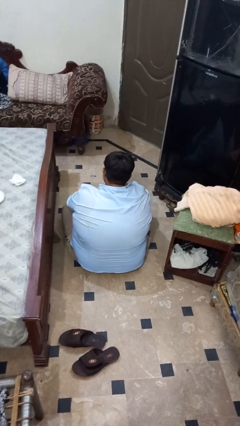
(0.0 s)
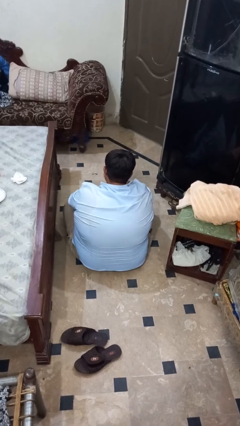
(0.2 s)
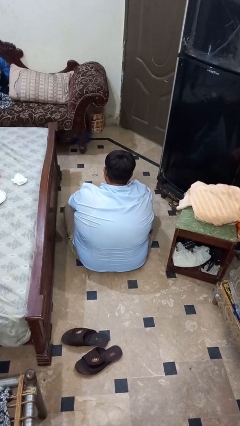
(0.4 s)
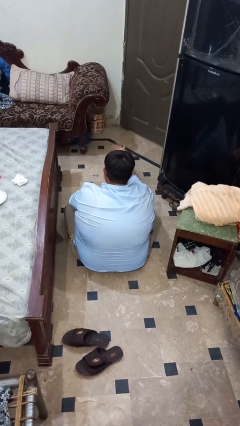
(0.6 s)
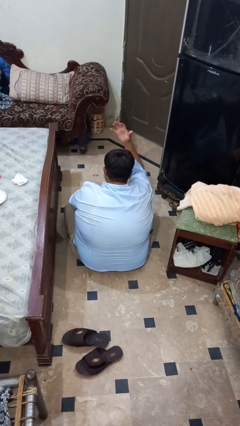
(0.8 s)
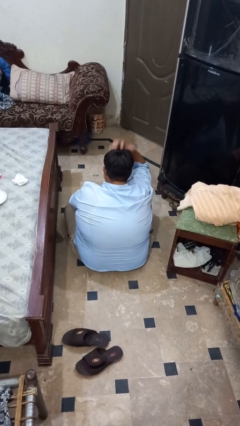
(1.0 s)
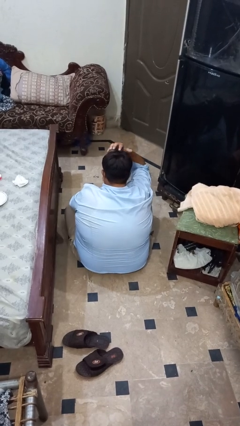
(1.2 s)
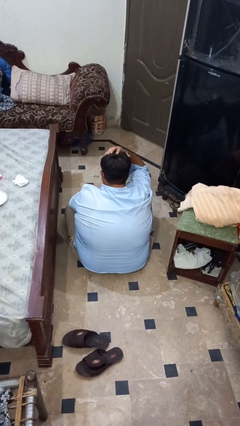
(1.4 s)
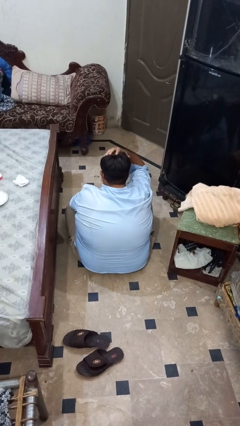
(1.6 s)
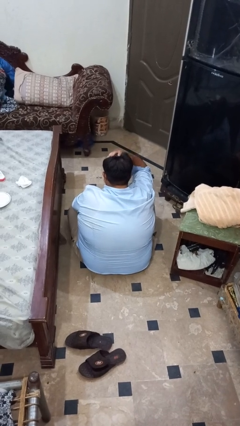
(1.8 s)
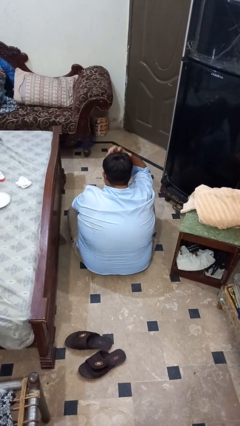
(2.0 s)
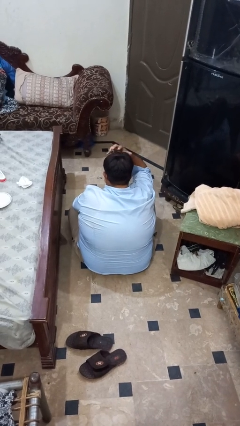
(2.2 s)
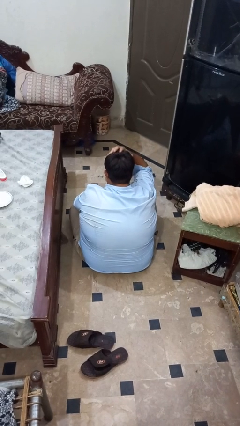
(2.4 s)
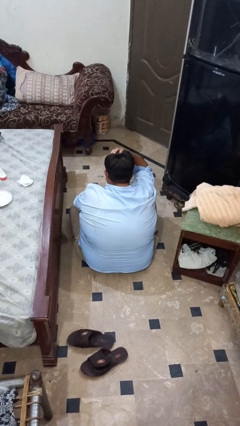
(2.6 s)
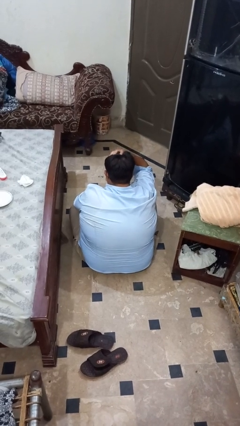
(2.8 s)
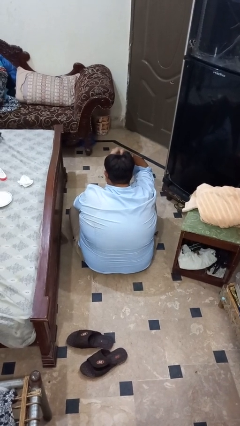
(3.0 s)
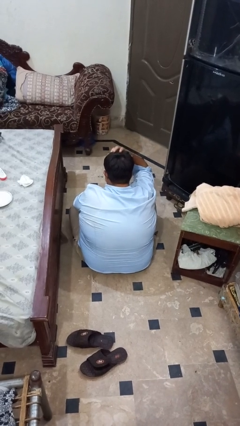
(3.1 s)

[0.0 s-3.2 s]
person pats head

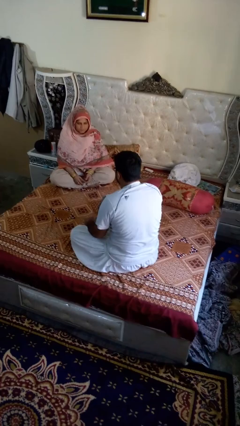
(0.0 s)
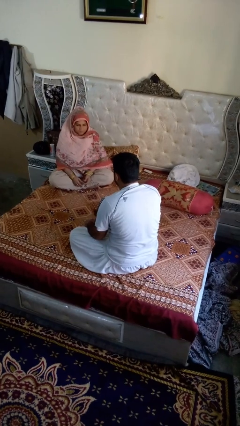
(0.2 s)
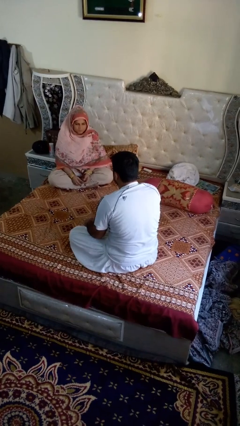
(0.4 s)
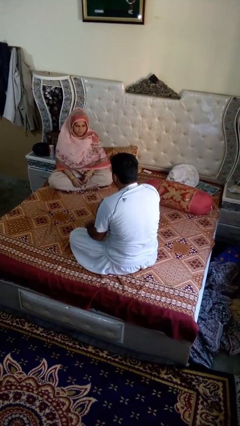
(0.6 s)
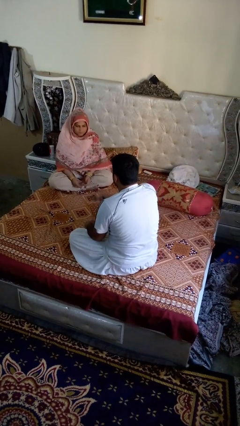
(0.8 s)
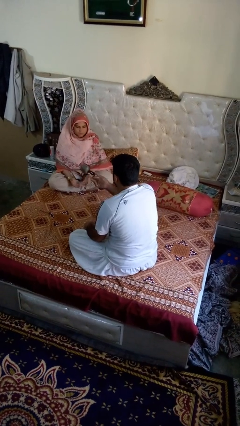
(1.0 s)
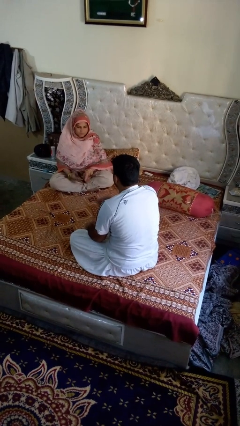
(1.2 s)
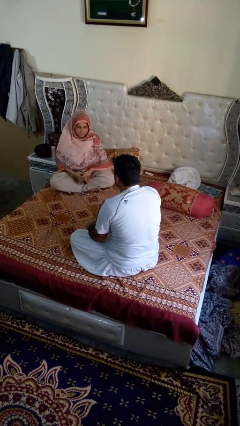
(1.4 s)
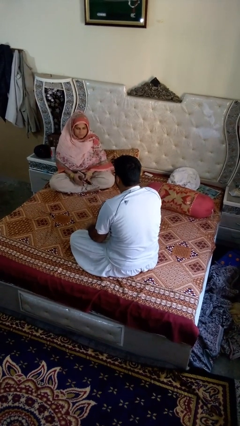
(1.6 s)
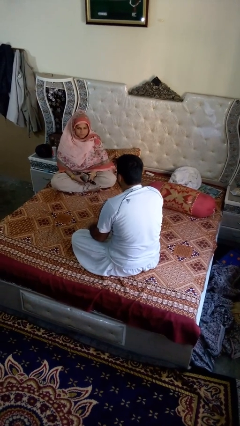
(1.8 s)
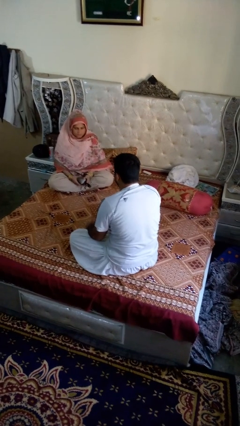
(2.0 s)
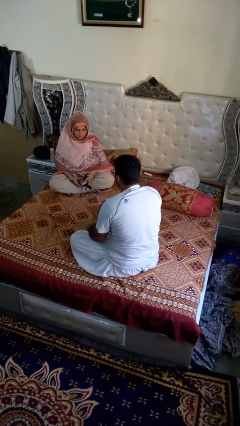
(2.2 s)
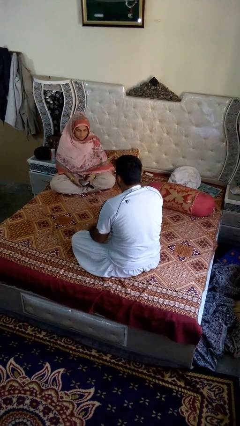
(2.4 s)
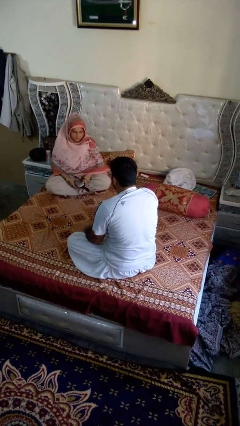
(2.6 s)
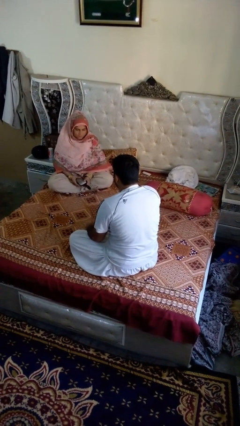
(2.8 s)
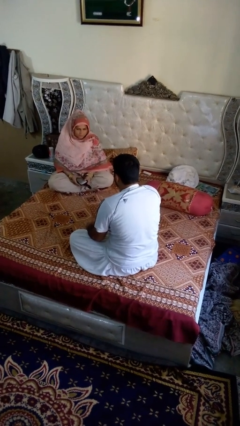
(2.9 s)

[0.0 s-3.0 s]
person throws object to person

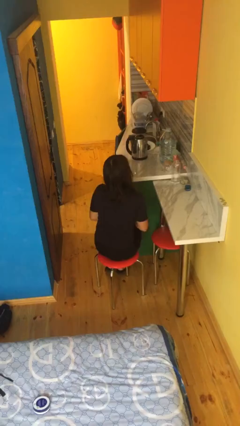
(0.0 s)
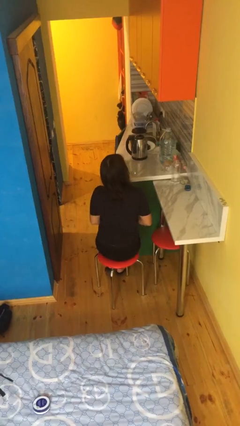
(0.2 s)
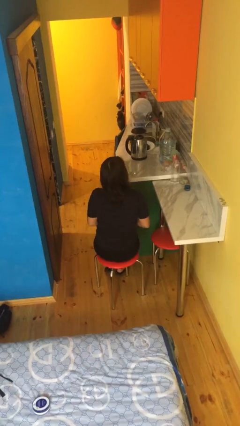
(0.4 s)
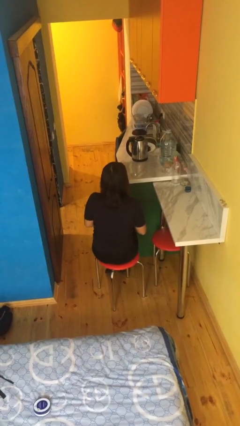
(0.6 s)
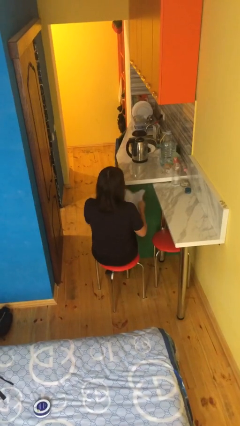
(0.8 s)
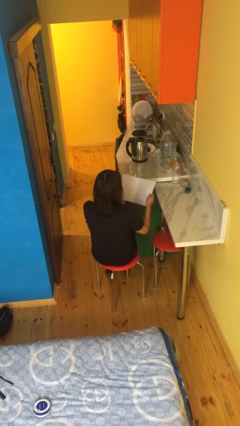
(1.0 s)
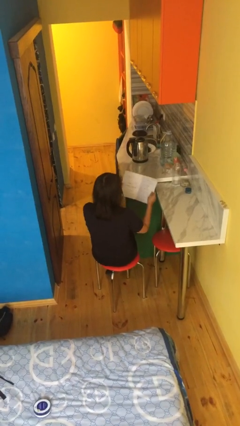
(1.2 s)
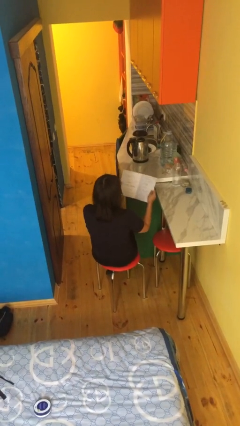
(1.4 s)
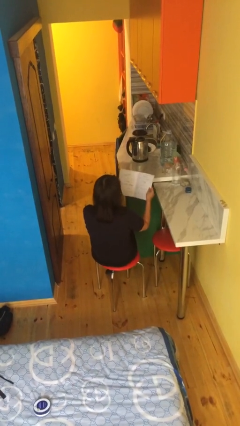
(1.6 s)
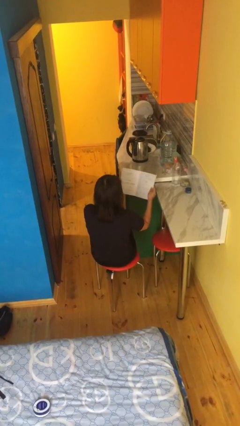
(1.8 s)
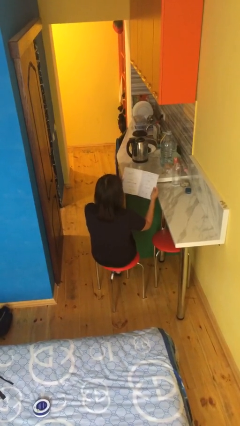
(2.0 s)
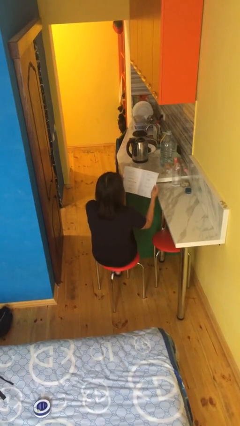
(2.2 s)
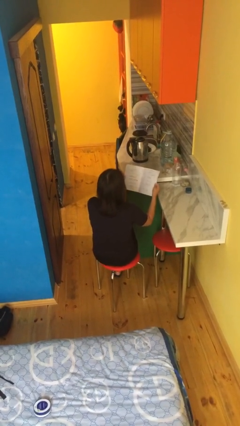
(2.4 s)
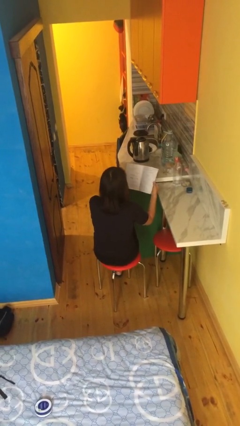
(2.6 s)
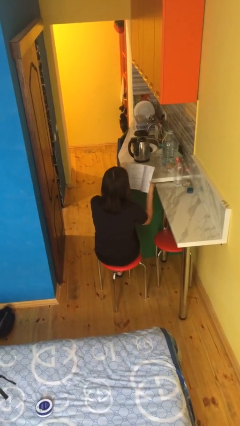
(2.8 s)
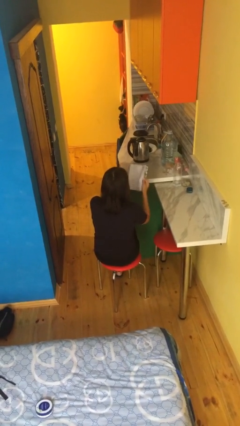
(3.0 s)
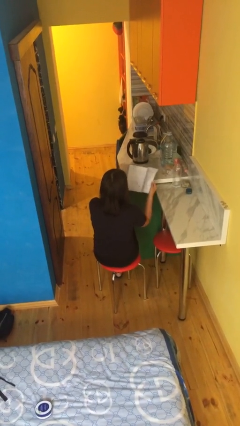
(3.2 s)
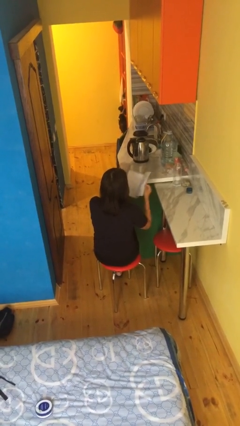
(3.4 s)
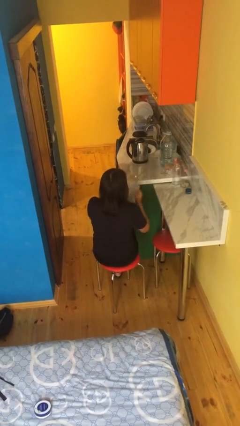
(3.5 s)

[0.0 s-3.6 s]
person reads book

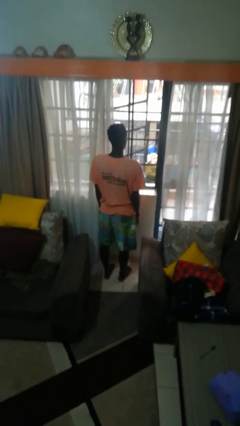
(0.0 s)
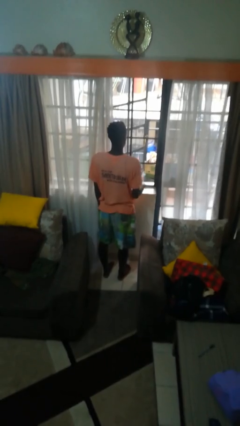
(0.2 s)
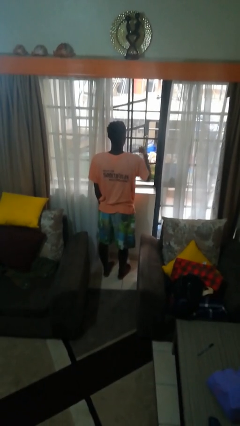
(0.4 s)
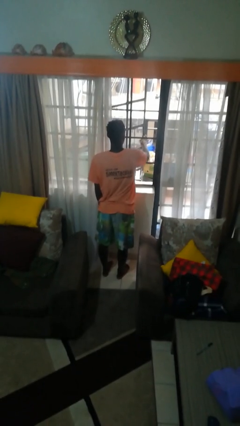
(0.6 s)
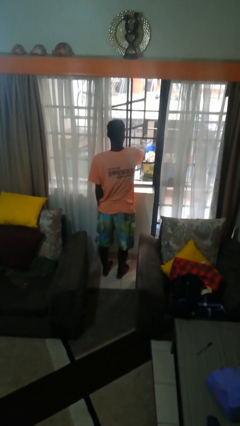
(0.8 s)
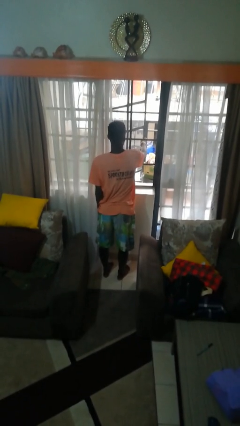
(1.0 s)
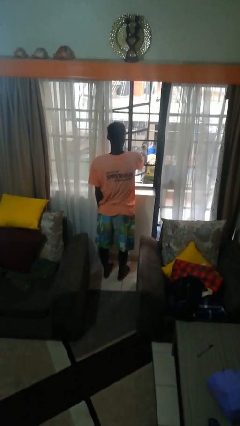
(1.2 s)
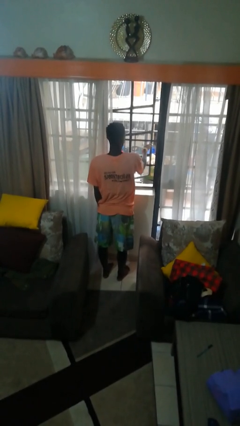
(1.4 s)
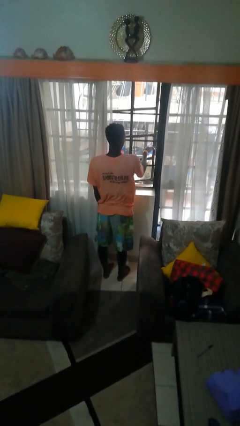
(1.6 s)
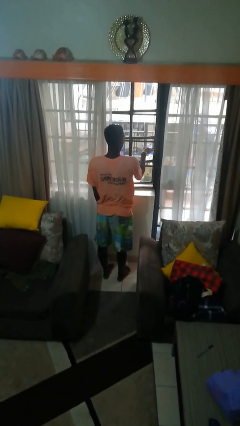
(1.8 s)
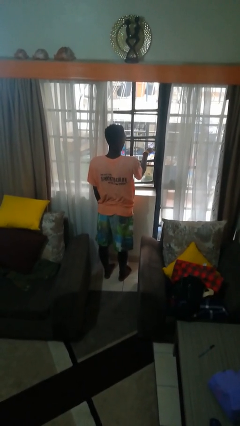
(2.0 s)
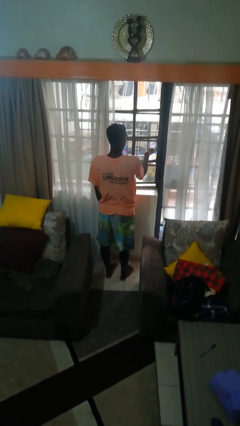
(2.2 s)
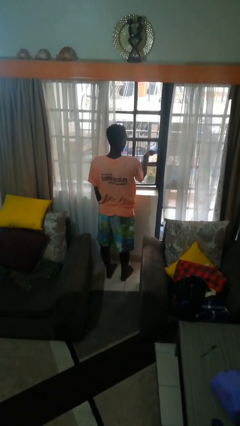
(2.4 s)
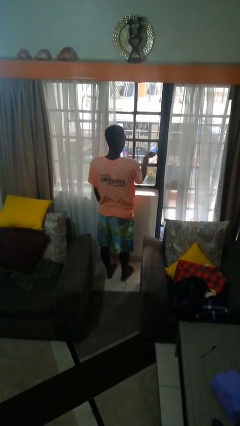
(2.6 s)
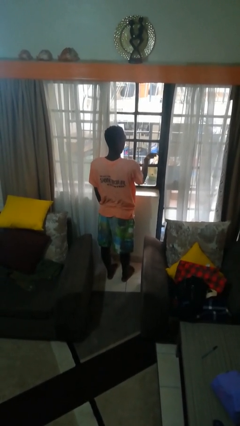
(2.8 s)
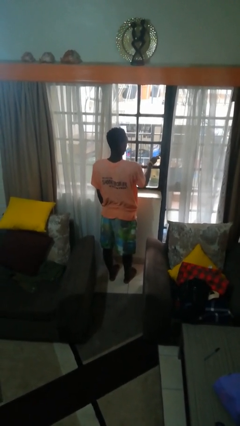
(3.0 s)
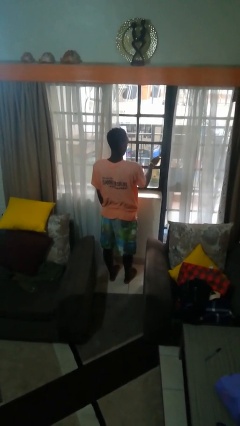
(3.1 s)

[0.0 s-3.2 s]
person closes home window

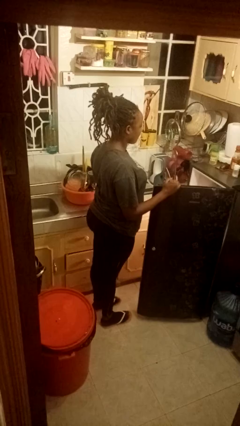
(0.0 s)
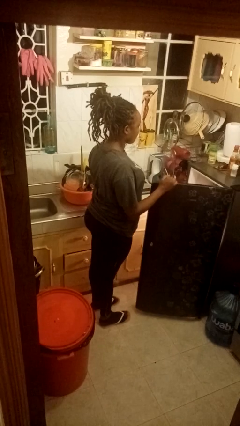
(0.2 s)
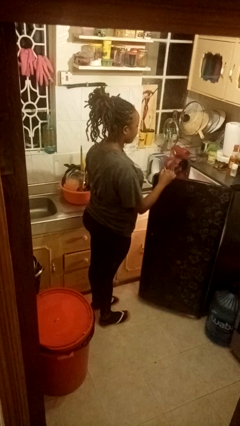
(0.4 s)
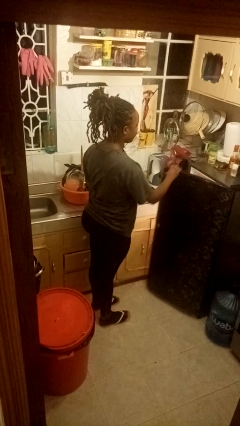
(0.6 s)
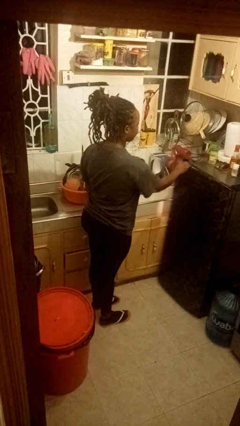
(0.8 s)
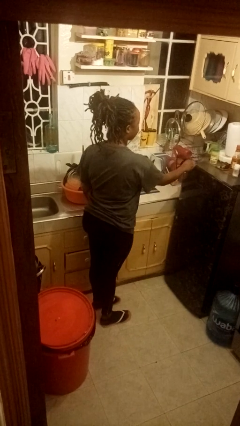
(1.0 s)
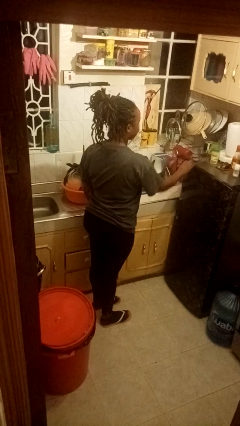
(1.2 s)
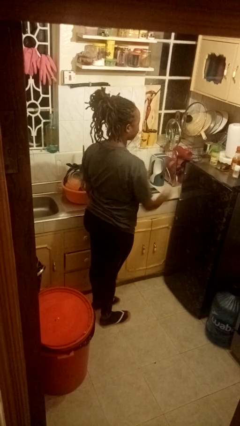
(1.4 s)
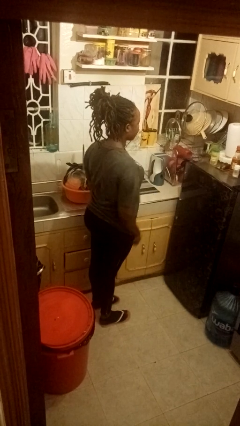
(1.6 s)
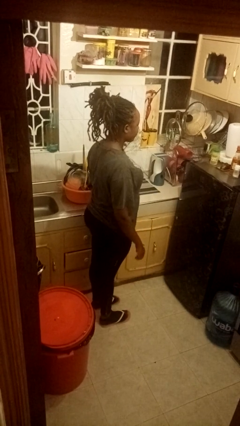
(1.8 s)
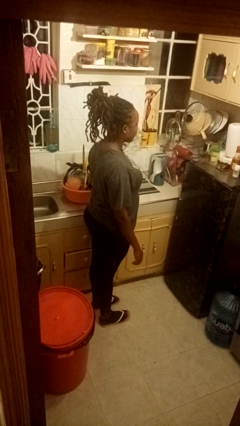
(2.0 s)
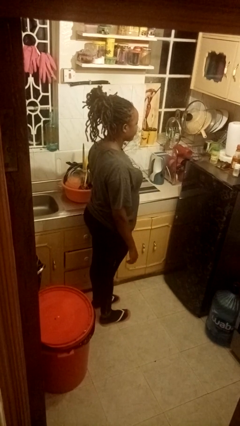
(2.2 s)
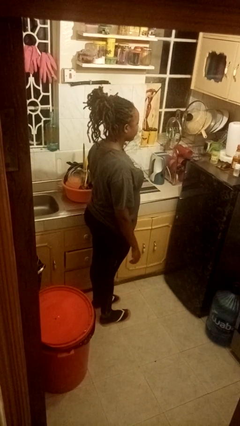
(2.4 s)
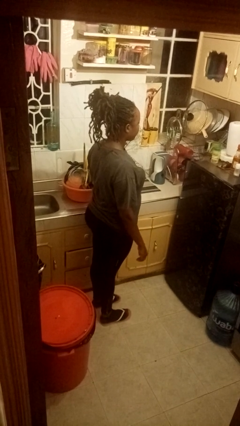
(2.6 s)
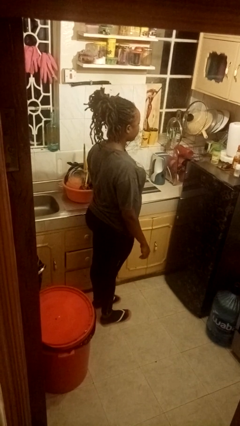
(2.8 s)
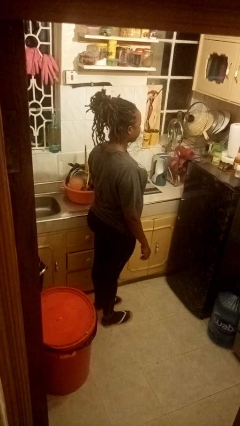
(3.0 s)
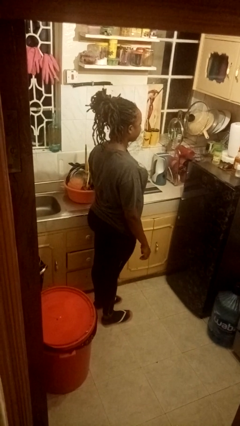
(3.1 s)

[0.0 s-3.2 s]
person closes refrigerator

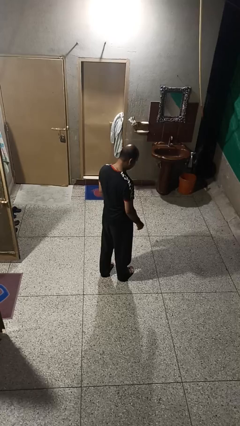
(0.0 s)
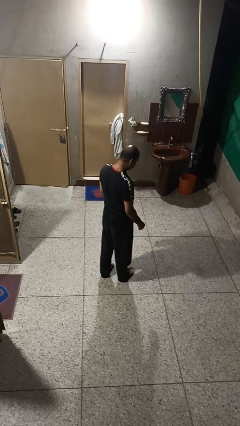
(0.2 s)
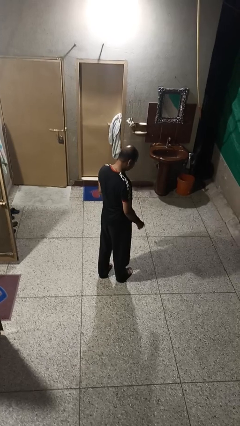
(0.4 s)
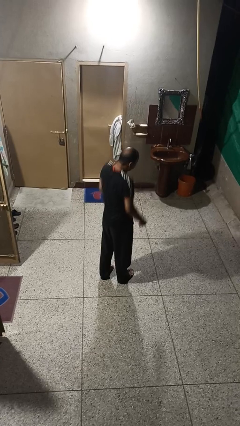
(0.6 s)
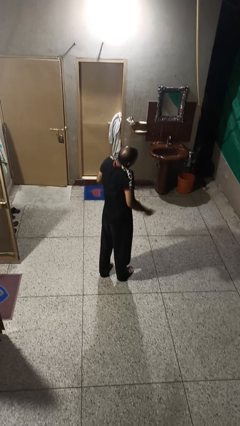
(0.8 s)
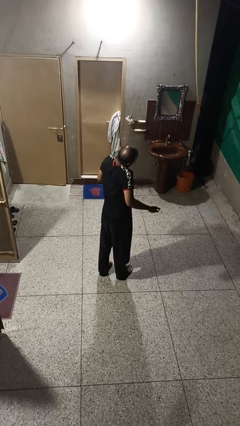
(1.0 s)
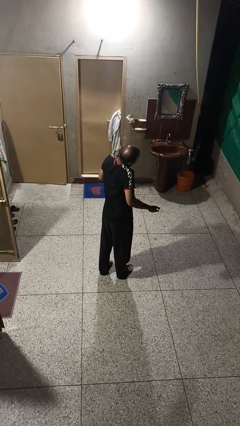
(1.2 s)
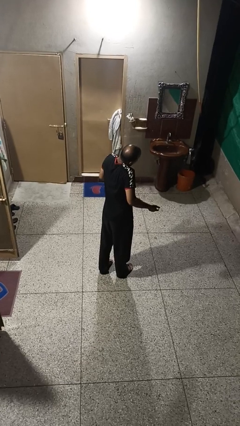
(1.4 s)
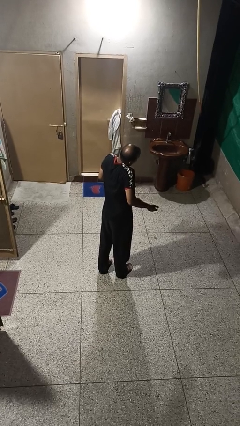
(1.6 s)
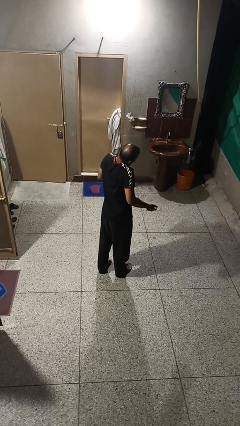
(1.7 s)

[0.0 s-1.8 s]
person shrugs
